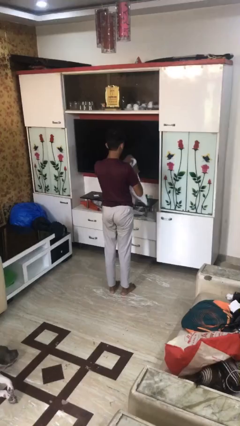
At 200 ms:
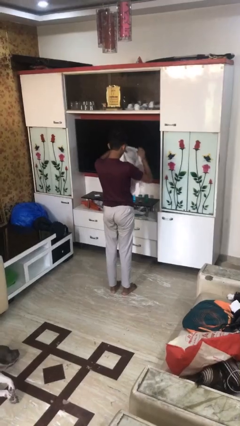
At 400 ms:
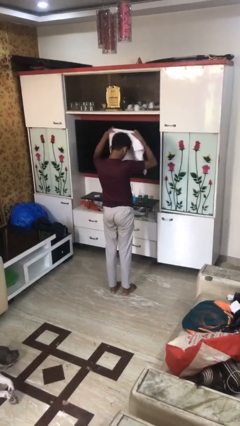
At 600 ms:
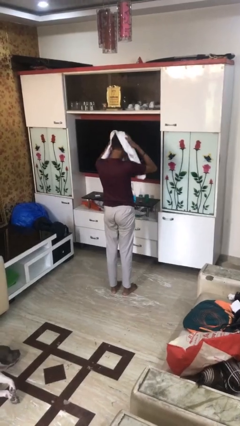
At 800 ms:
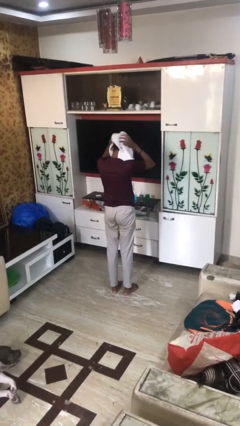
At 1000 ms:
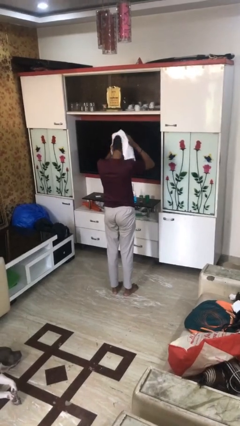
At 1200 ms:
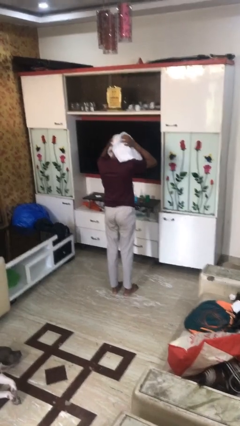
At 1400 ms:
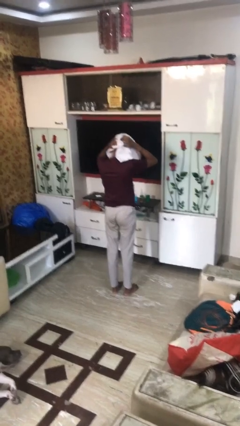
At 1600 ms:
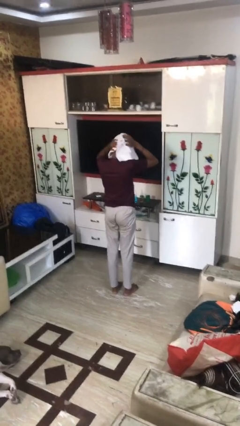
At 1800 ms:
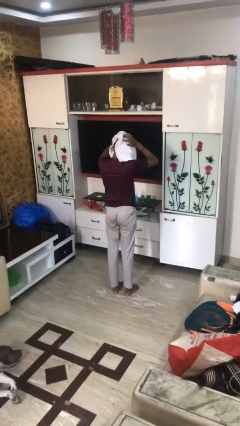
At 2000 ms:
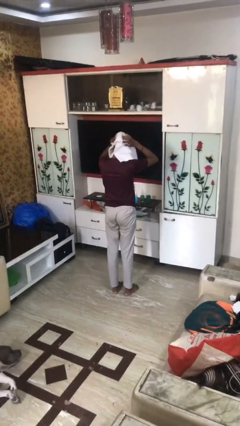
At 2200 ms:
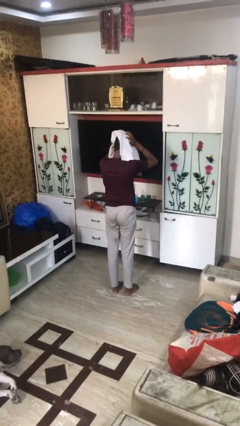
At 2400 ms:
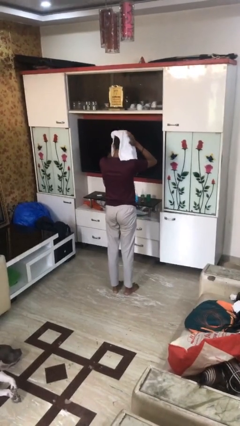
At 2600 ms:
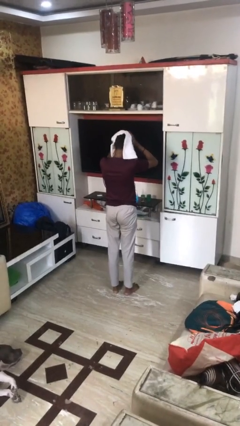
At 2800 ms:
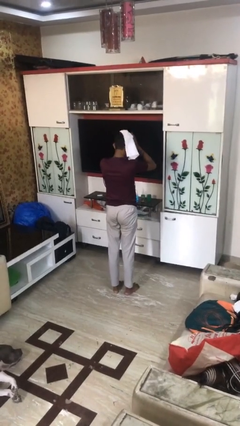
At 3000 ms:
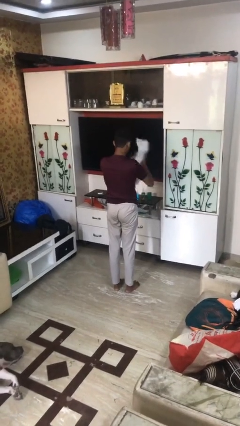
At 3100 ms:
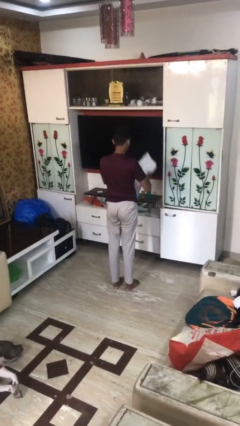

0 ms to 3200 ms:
person dries hair with towel

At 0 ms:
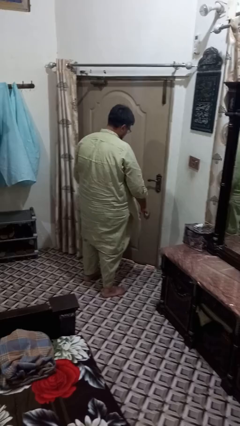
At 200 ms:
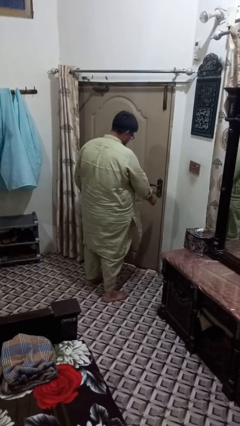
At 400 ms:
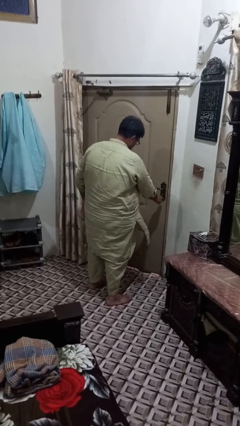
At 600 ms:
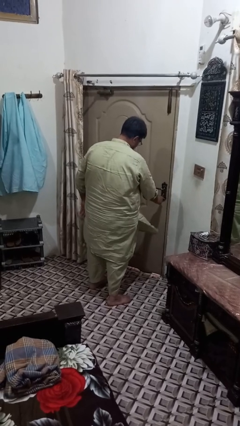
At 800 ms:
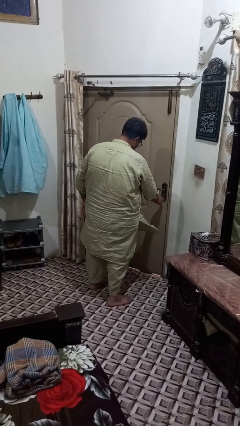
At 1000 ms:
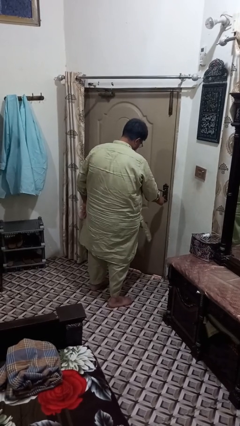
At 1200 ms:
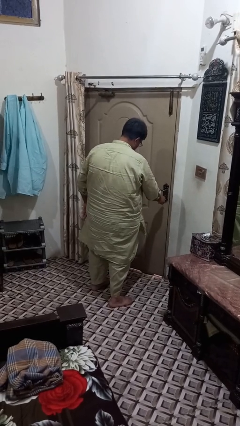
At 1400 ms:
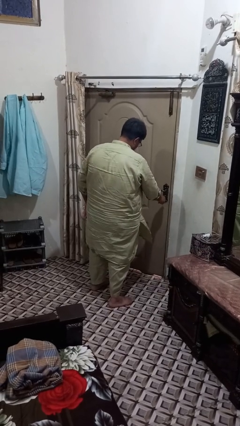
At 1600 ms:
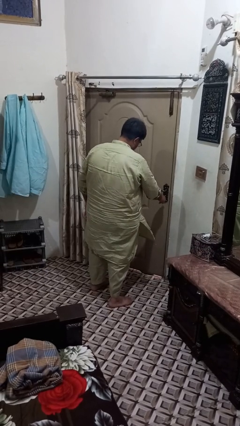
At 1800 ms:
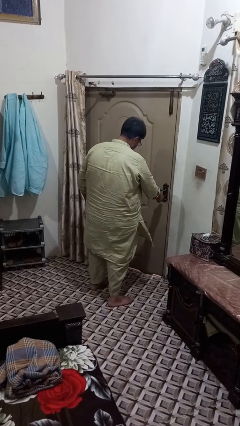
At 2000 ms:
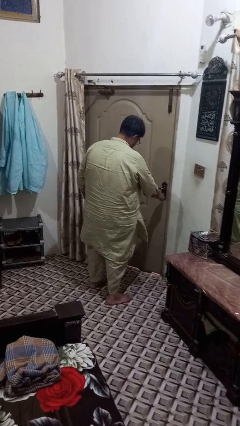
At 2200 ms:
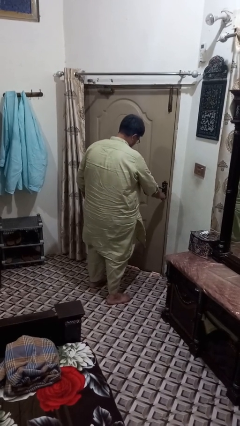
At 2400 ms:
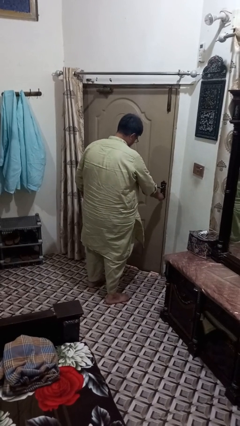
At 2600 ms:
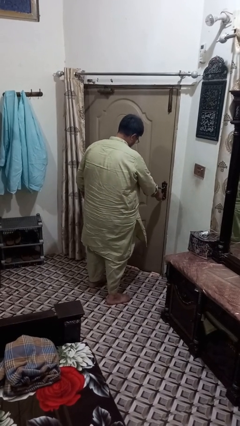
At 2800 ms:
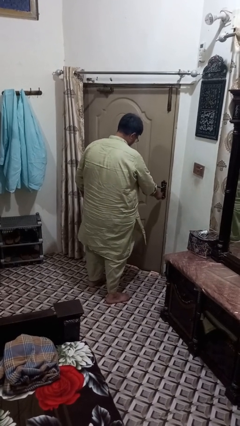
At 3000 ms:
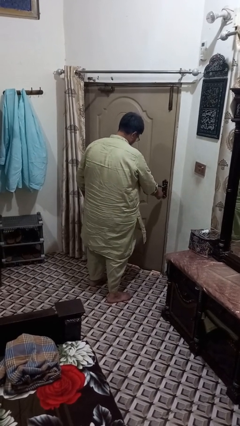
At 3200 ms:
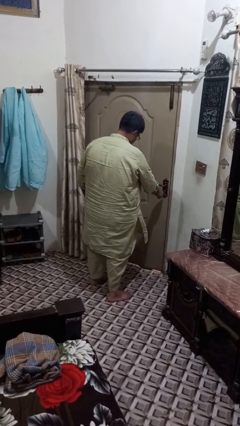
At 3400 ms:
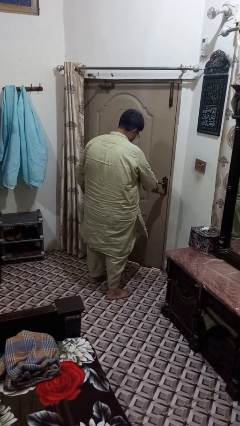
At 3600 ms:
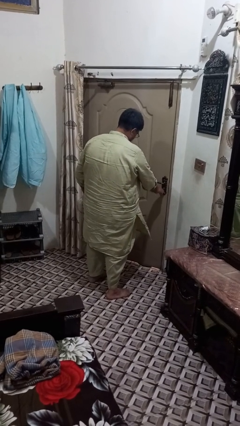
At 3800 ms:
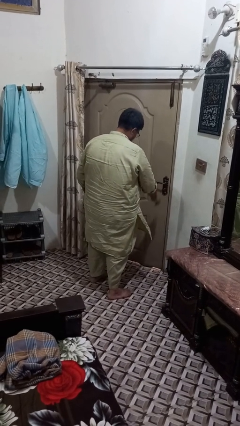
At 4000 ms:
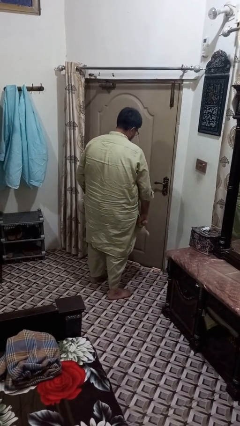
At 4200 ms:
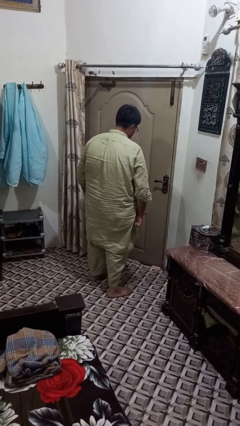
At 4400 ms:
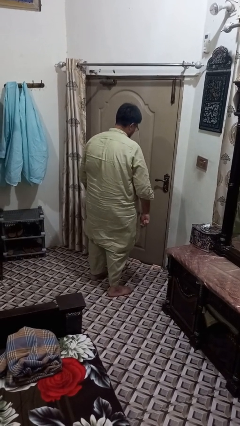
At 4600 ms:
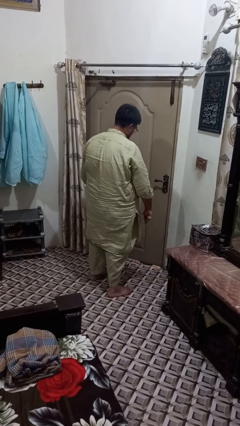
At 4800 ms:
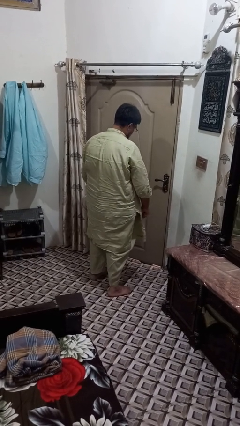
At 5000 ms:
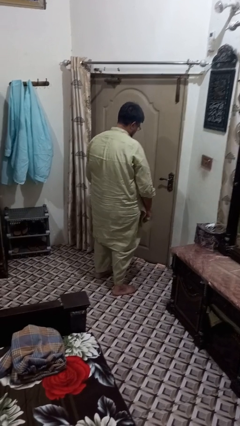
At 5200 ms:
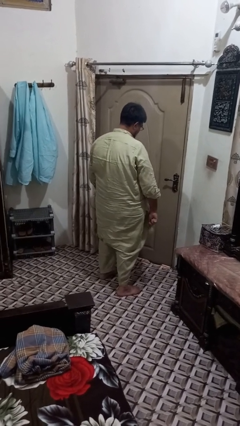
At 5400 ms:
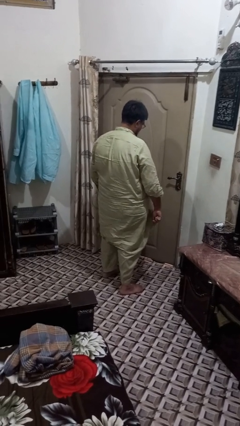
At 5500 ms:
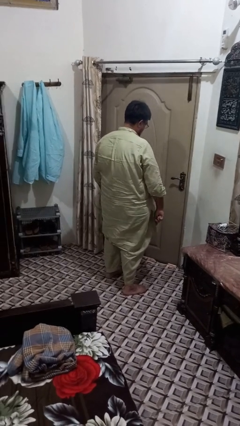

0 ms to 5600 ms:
person locks door with keys

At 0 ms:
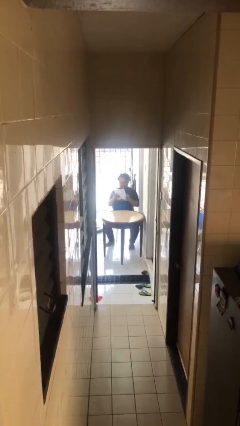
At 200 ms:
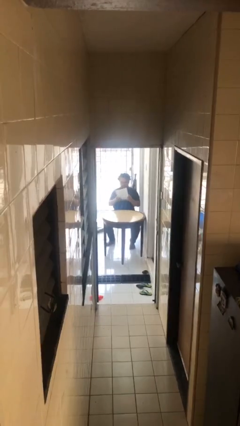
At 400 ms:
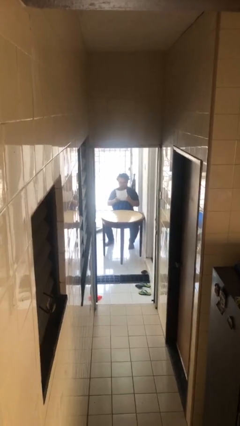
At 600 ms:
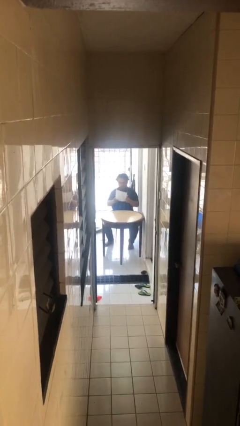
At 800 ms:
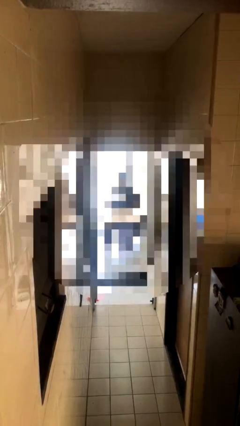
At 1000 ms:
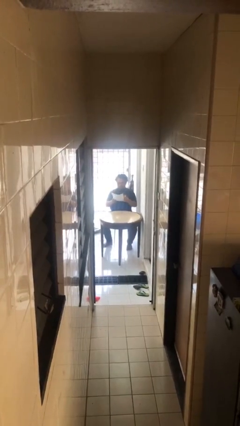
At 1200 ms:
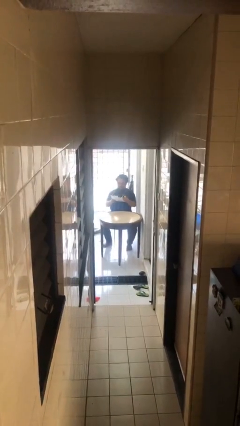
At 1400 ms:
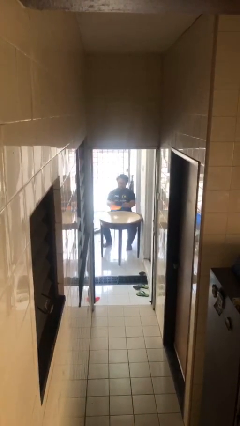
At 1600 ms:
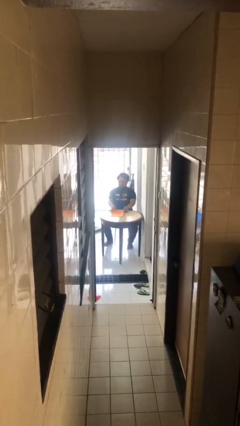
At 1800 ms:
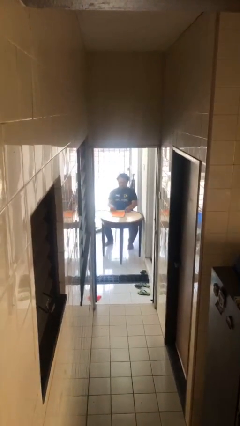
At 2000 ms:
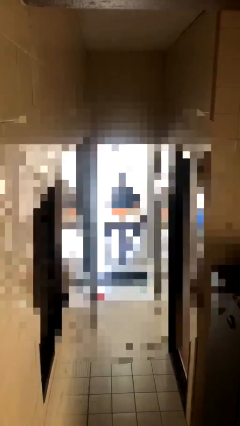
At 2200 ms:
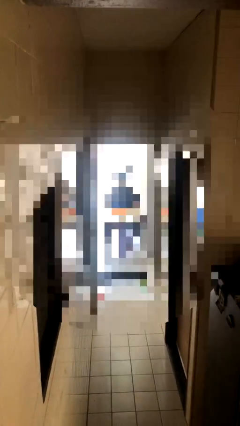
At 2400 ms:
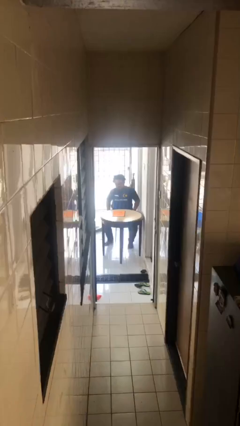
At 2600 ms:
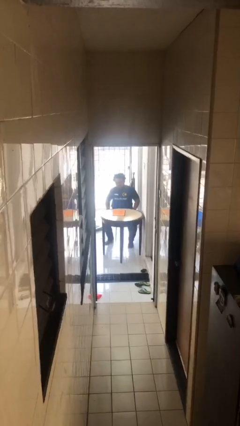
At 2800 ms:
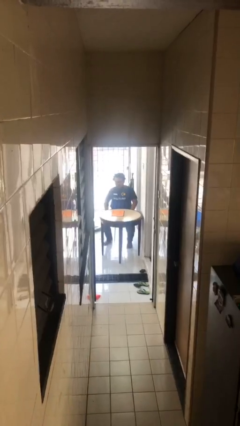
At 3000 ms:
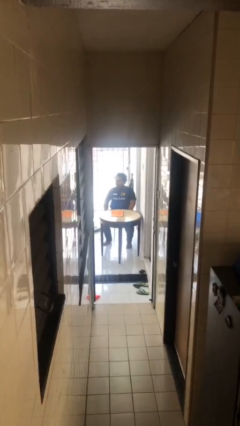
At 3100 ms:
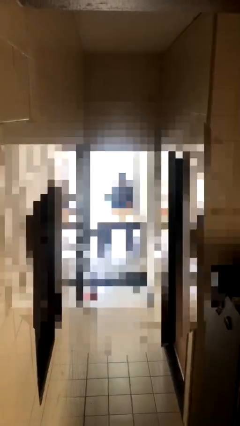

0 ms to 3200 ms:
person puts down object on table

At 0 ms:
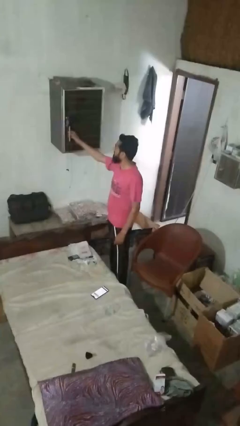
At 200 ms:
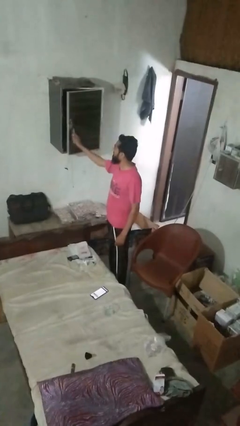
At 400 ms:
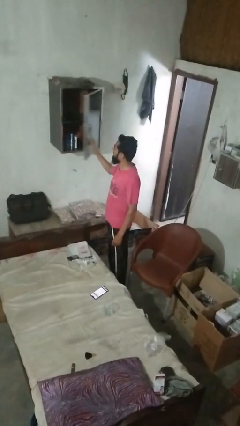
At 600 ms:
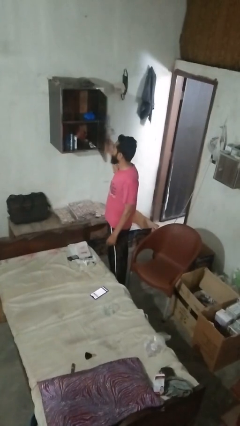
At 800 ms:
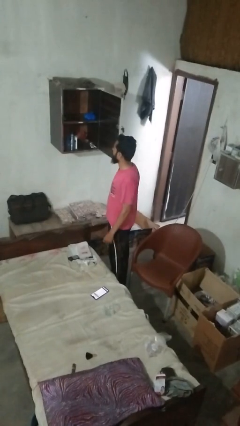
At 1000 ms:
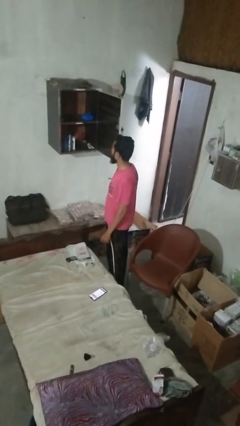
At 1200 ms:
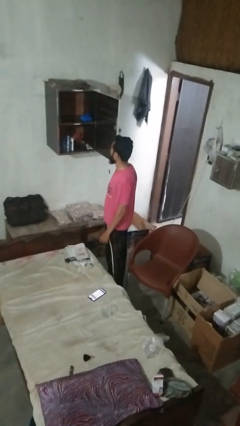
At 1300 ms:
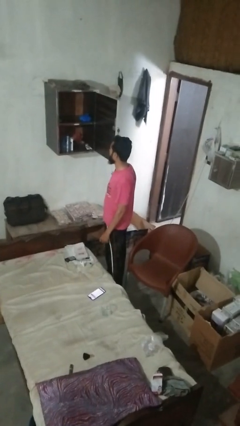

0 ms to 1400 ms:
person opens dresser drawer

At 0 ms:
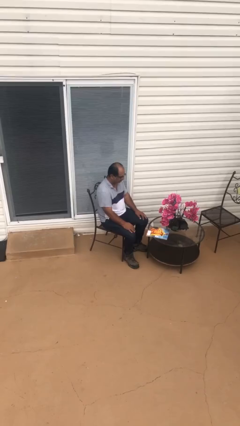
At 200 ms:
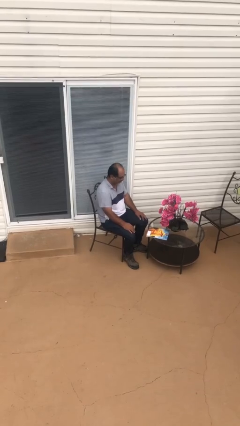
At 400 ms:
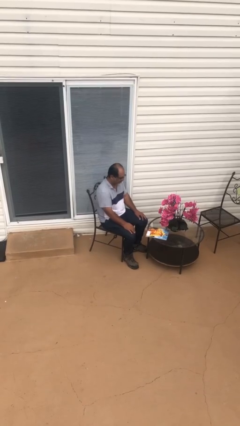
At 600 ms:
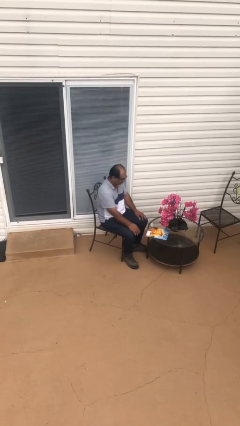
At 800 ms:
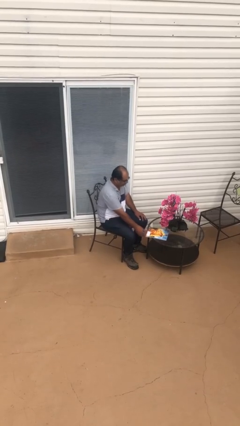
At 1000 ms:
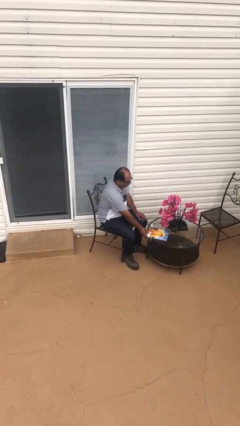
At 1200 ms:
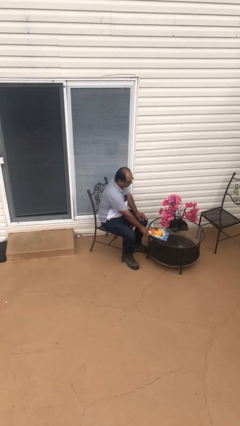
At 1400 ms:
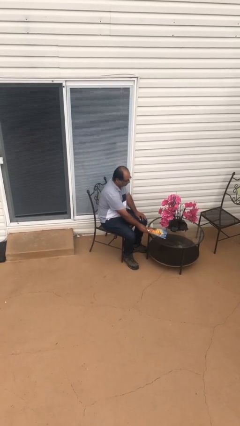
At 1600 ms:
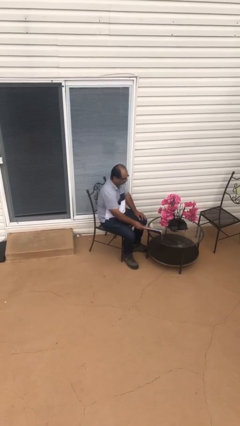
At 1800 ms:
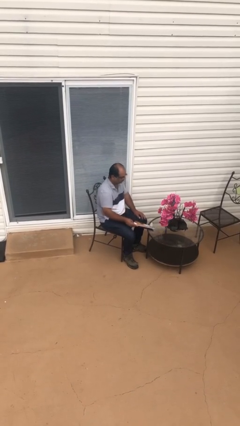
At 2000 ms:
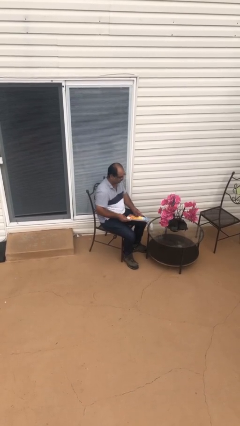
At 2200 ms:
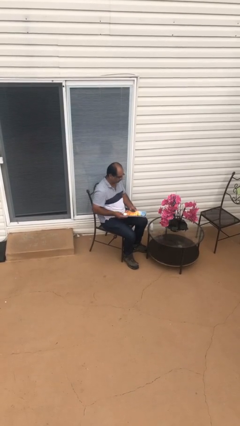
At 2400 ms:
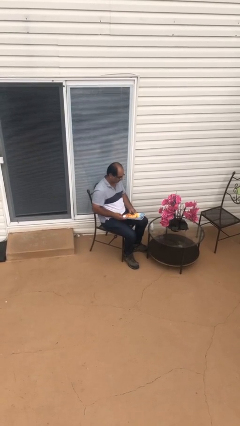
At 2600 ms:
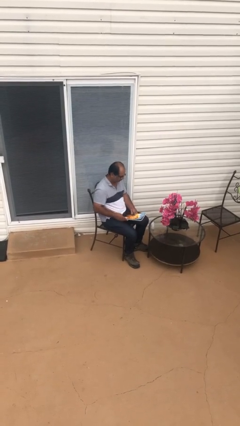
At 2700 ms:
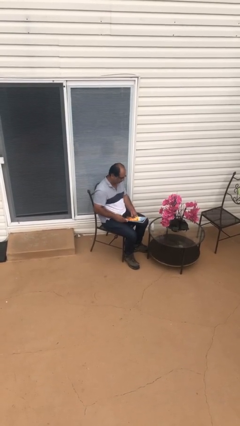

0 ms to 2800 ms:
person picks up object from table

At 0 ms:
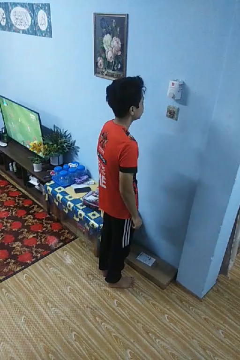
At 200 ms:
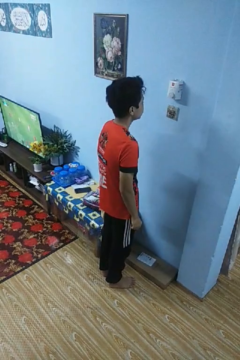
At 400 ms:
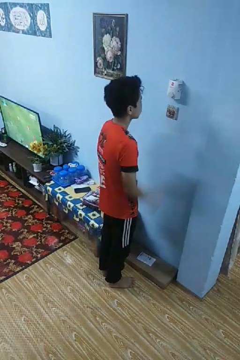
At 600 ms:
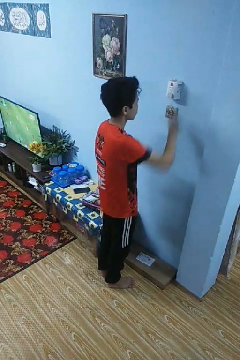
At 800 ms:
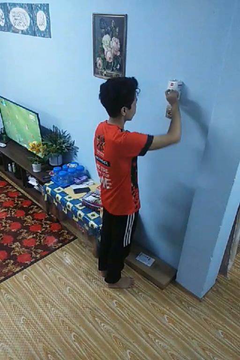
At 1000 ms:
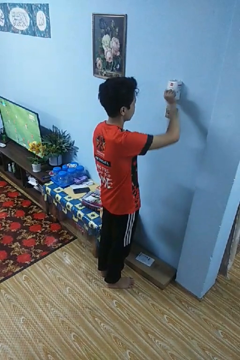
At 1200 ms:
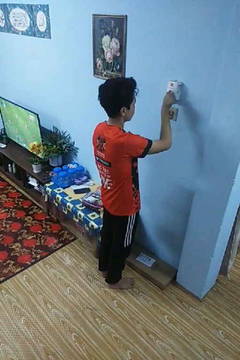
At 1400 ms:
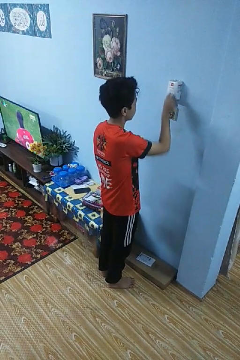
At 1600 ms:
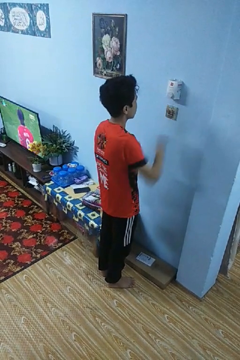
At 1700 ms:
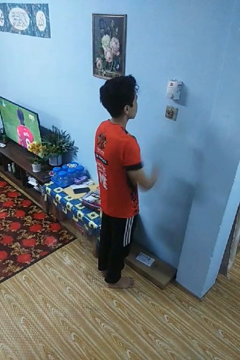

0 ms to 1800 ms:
person adjusts thermostat
